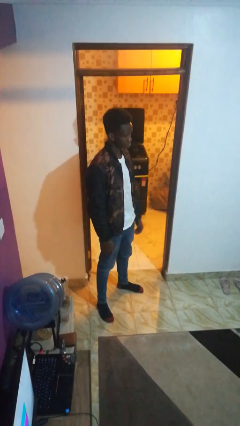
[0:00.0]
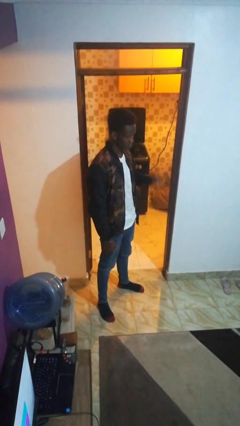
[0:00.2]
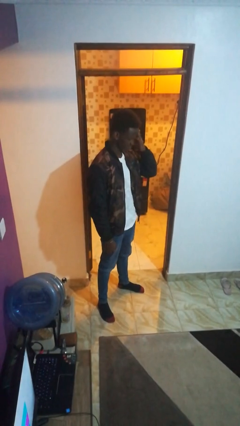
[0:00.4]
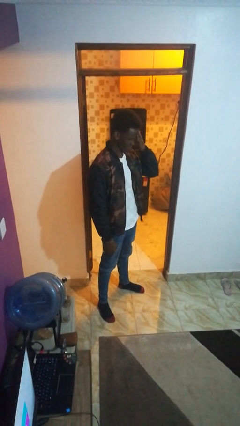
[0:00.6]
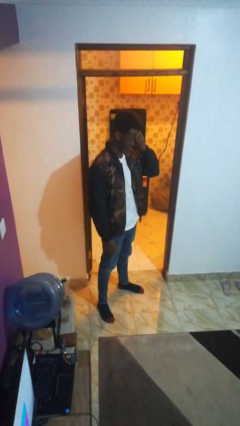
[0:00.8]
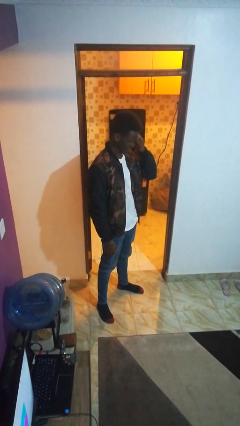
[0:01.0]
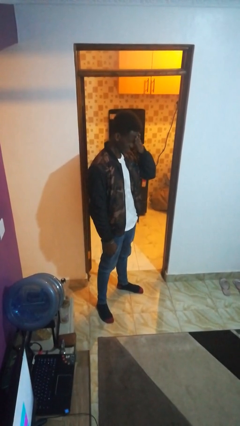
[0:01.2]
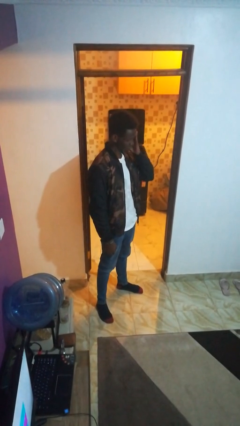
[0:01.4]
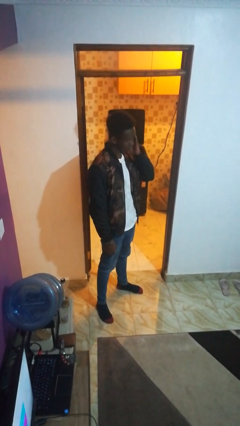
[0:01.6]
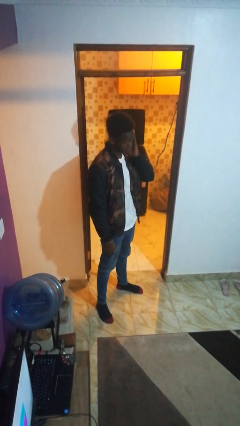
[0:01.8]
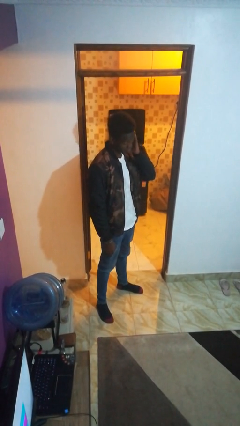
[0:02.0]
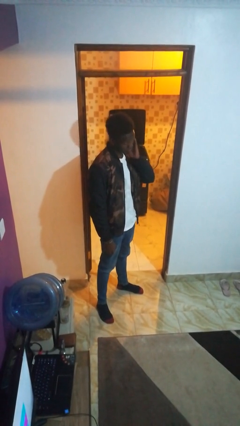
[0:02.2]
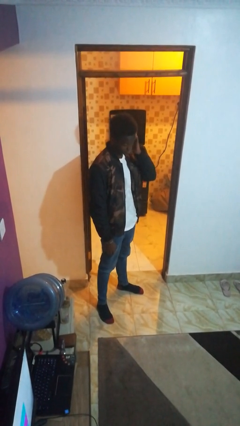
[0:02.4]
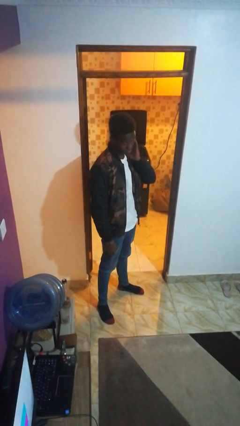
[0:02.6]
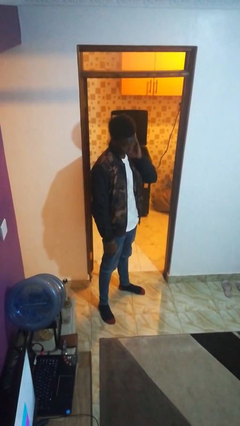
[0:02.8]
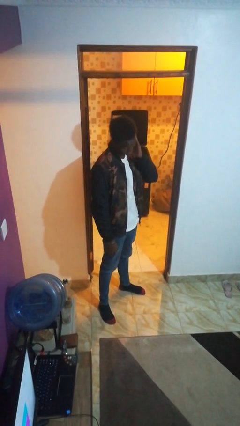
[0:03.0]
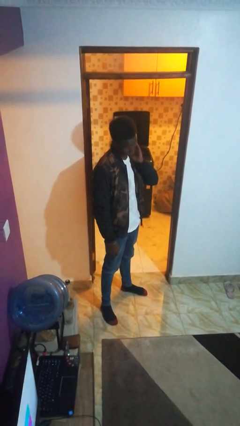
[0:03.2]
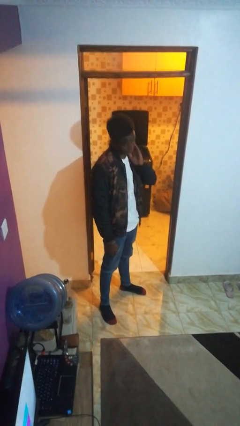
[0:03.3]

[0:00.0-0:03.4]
person scratches face

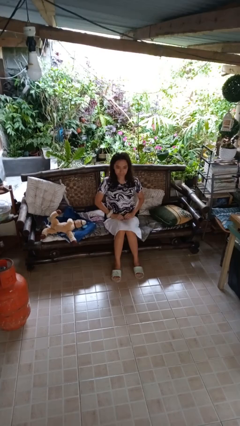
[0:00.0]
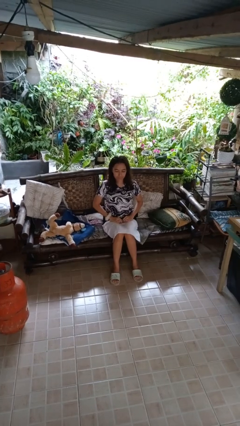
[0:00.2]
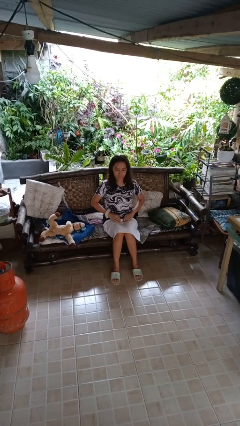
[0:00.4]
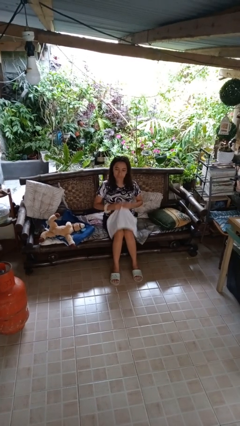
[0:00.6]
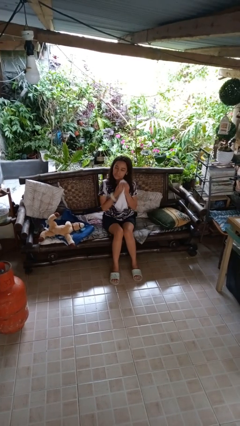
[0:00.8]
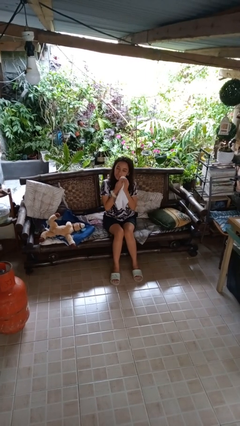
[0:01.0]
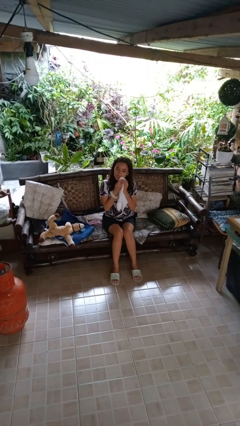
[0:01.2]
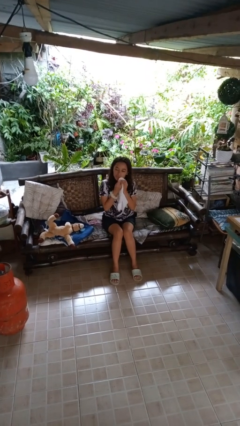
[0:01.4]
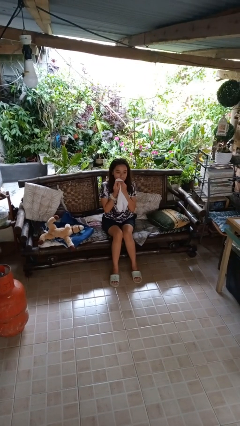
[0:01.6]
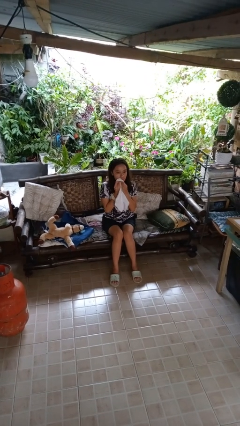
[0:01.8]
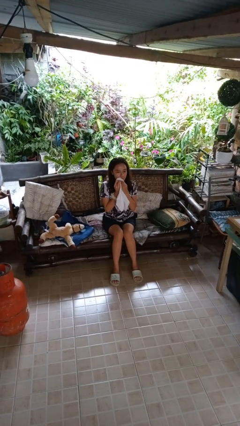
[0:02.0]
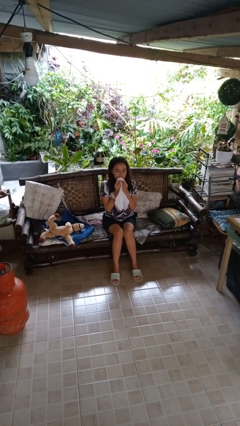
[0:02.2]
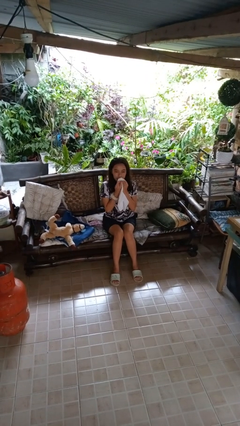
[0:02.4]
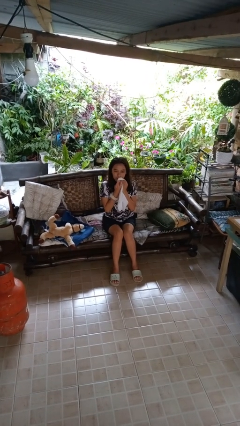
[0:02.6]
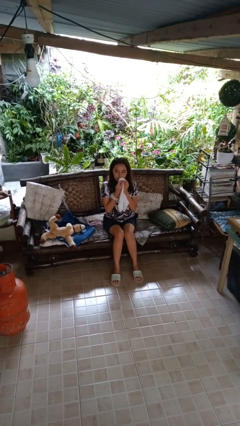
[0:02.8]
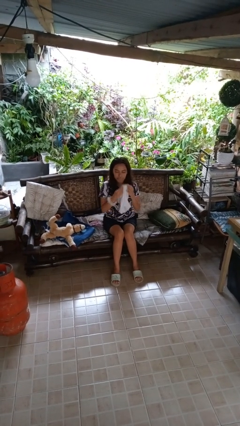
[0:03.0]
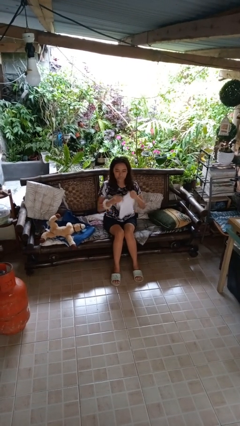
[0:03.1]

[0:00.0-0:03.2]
person wipes mouth with napkin

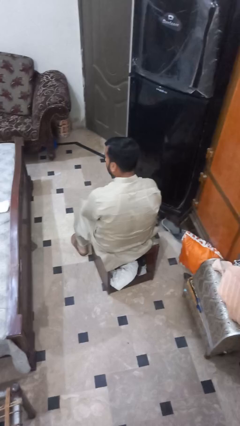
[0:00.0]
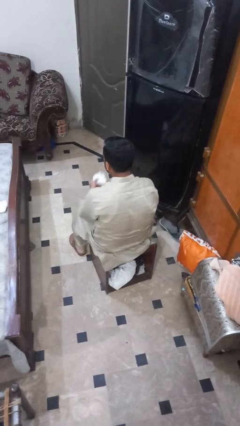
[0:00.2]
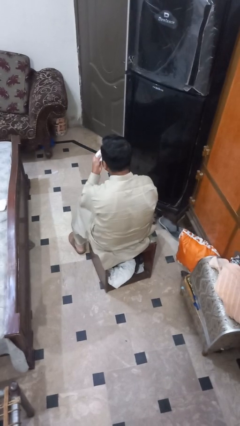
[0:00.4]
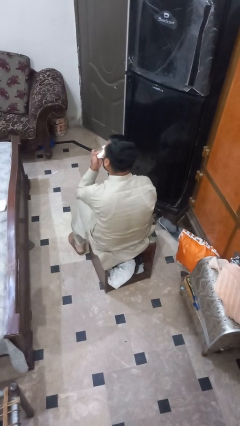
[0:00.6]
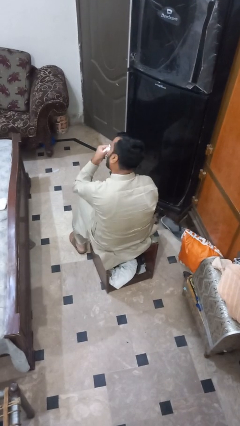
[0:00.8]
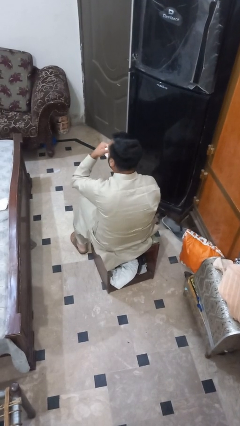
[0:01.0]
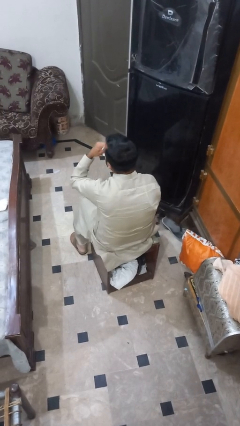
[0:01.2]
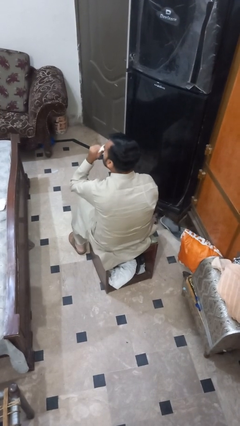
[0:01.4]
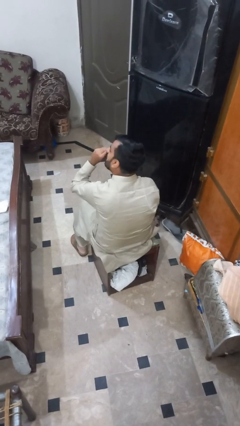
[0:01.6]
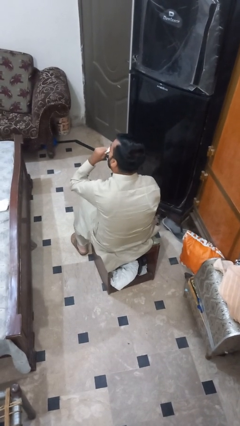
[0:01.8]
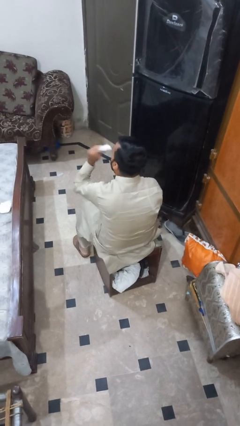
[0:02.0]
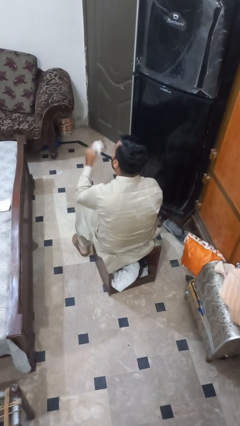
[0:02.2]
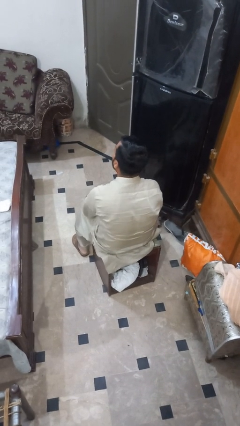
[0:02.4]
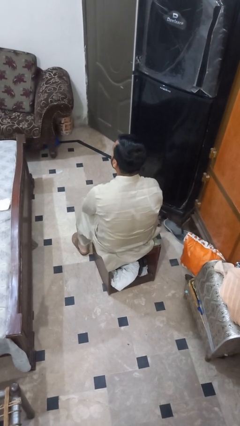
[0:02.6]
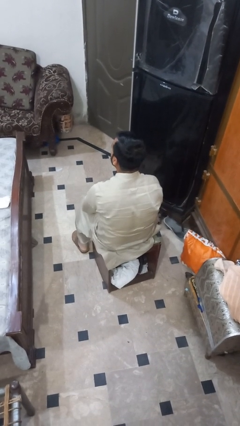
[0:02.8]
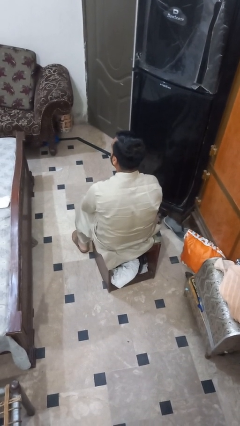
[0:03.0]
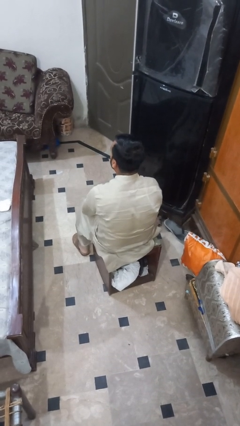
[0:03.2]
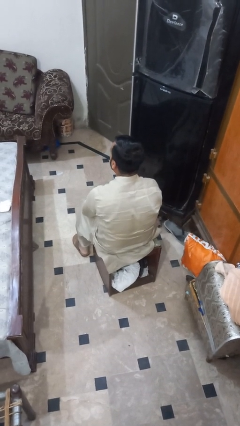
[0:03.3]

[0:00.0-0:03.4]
person blows nose

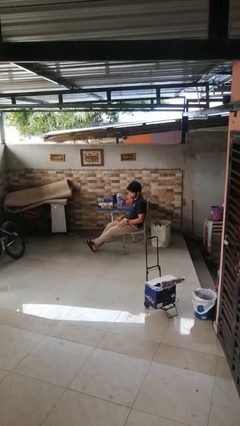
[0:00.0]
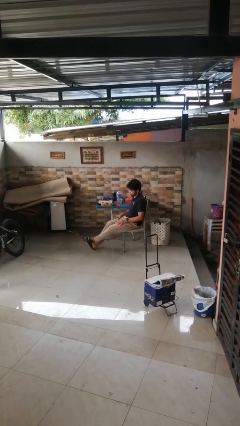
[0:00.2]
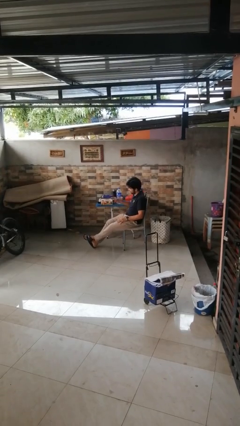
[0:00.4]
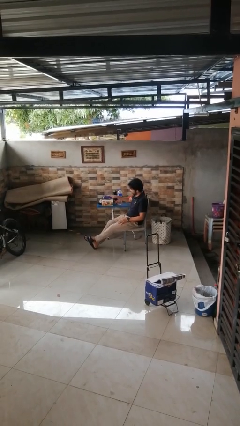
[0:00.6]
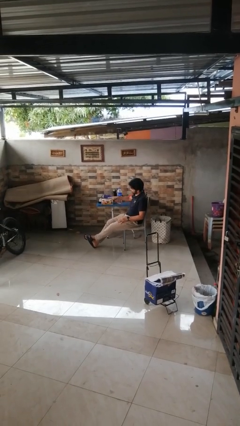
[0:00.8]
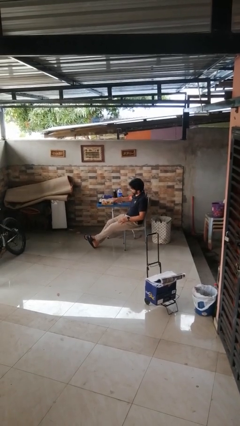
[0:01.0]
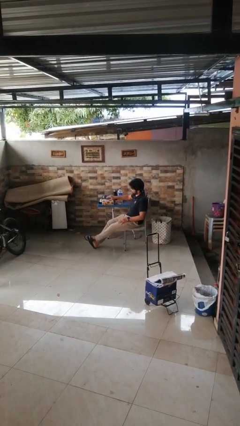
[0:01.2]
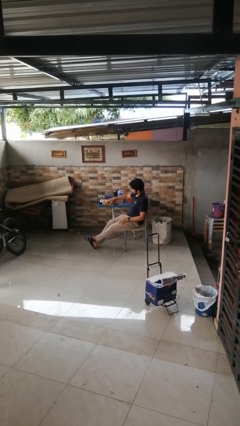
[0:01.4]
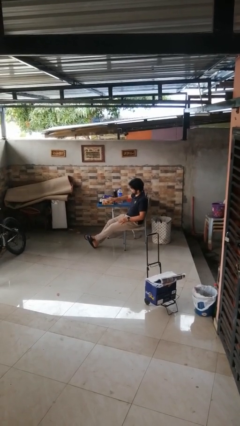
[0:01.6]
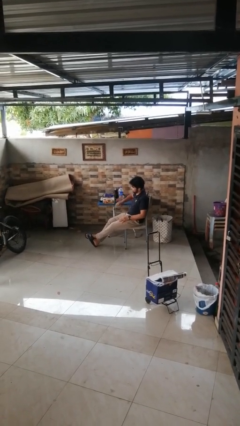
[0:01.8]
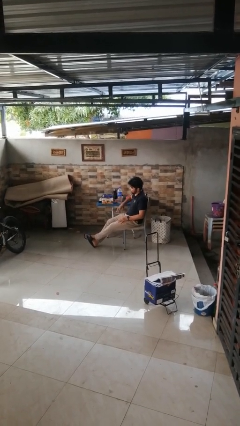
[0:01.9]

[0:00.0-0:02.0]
person taps object with finger

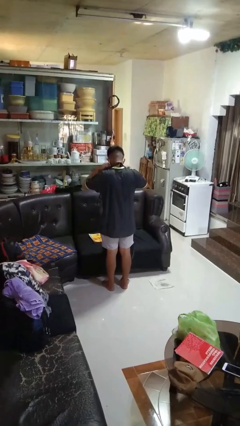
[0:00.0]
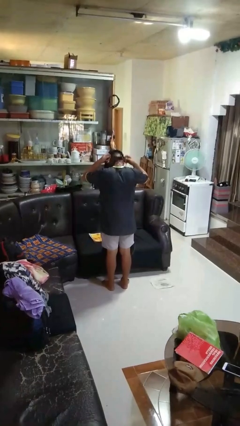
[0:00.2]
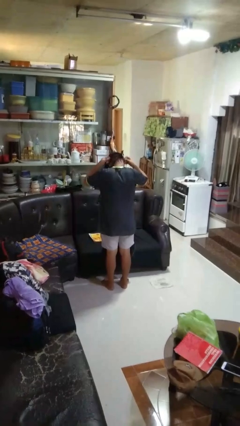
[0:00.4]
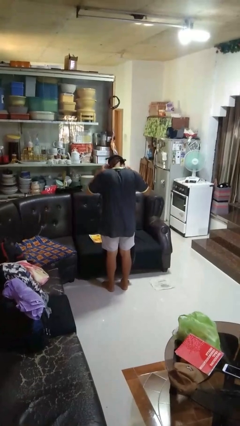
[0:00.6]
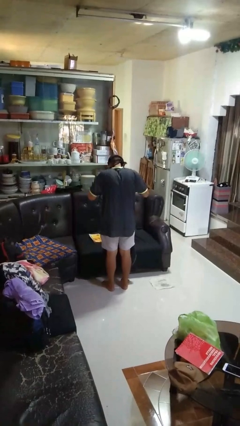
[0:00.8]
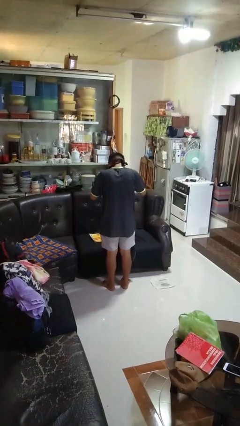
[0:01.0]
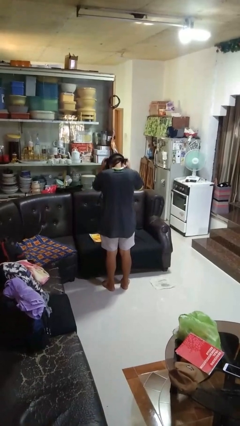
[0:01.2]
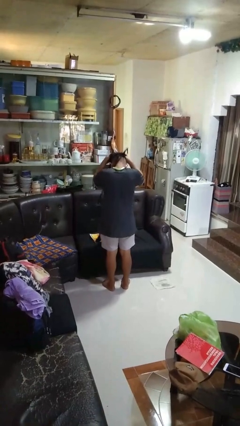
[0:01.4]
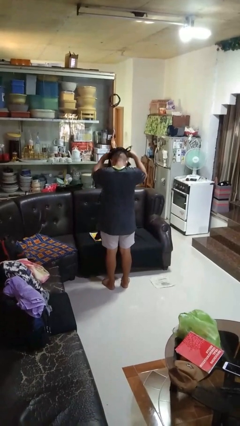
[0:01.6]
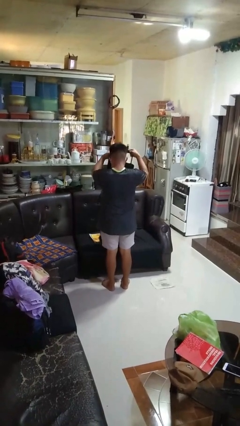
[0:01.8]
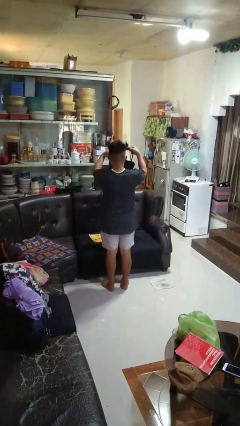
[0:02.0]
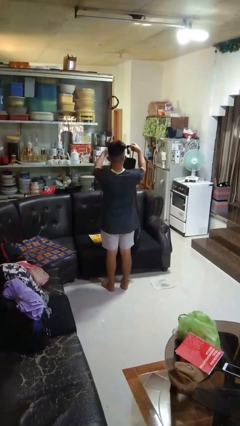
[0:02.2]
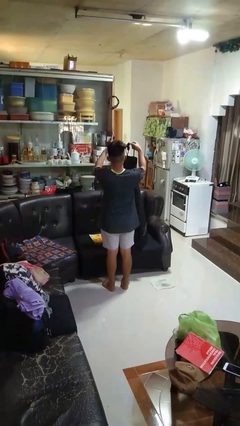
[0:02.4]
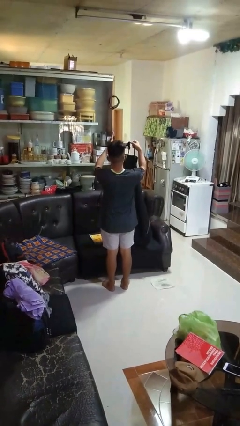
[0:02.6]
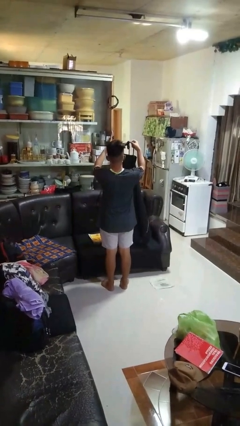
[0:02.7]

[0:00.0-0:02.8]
person takes off apron

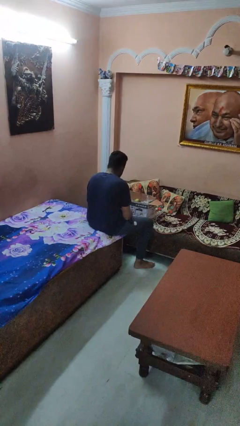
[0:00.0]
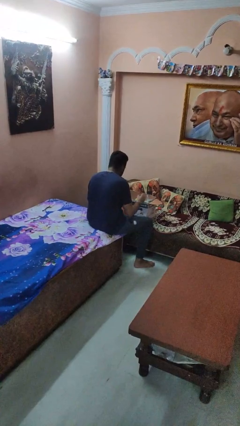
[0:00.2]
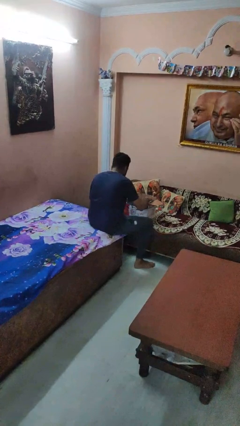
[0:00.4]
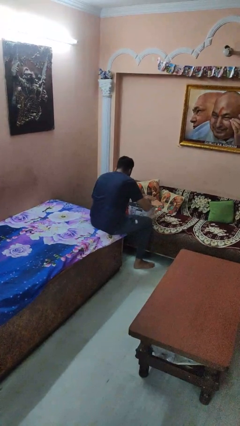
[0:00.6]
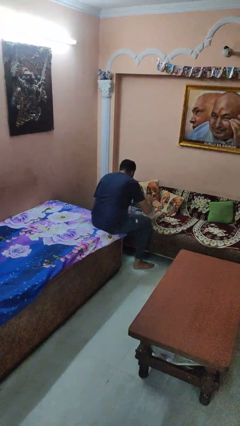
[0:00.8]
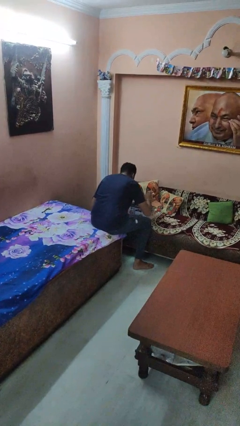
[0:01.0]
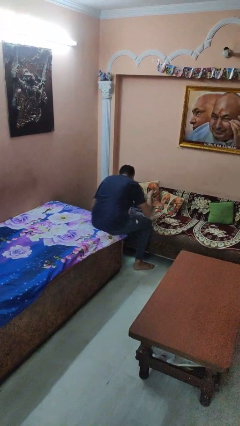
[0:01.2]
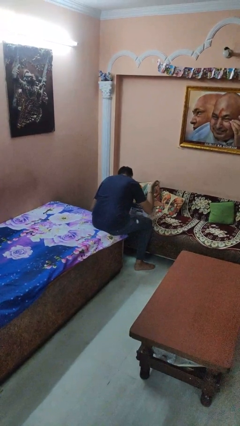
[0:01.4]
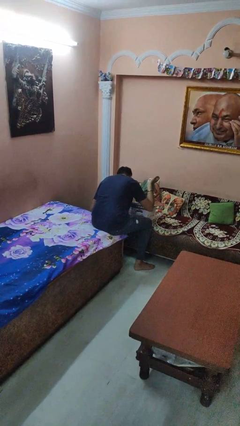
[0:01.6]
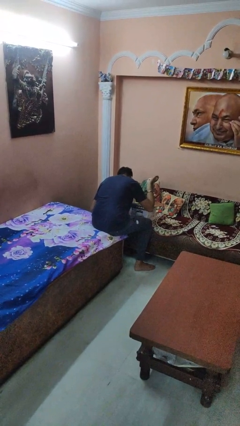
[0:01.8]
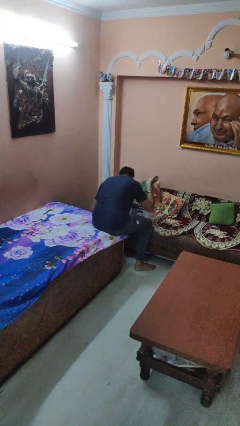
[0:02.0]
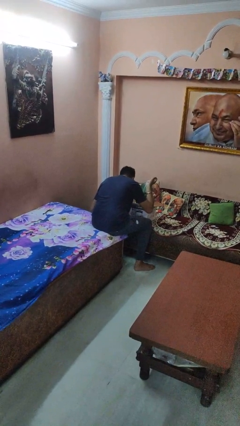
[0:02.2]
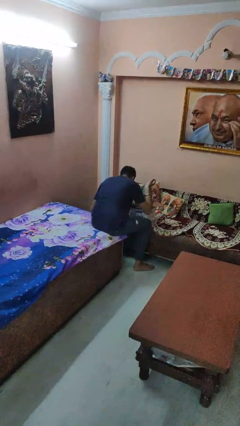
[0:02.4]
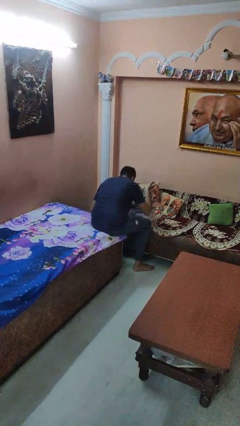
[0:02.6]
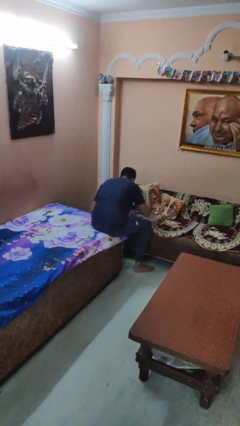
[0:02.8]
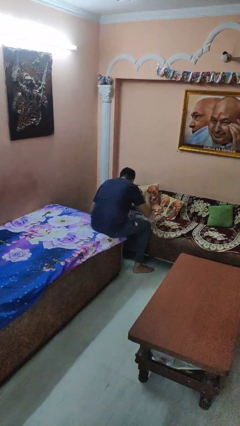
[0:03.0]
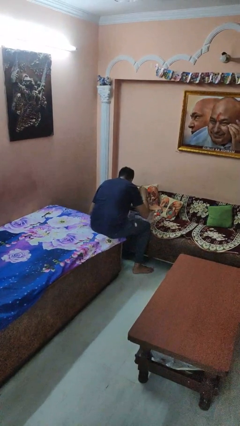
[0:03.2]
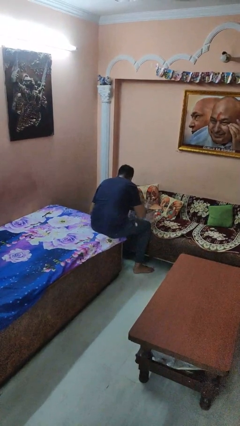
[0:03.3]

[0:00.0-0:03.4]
person searches in box
